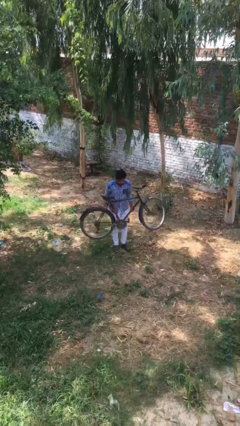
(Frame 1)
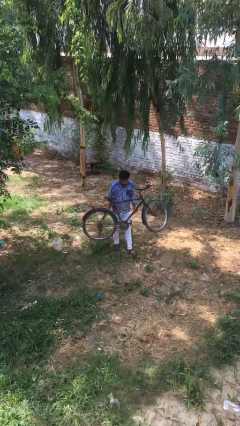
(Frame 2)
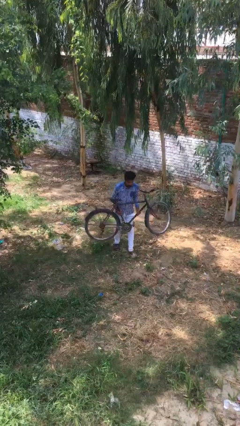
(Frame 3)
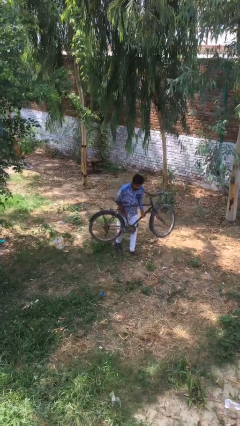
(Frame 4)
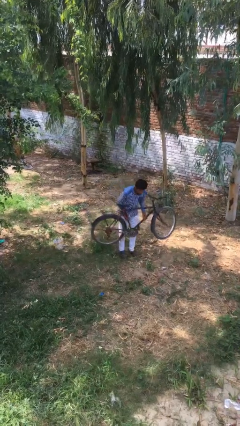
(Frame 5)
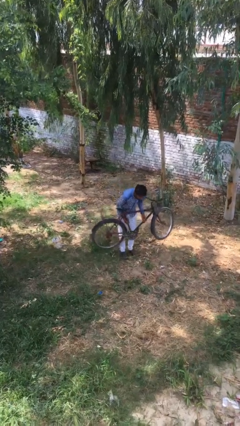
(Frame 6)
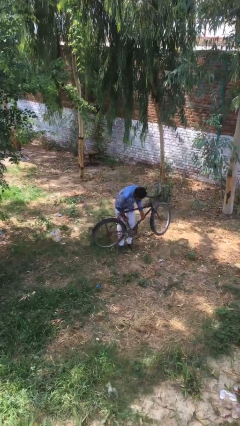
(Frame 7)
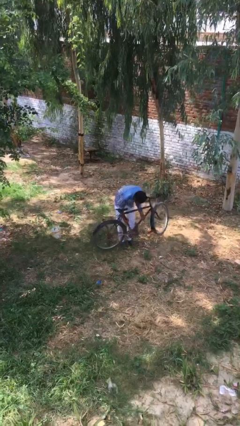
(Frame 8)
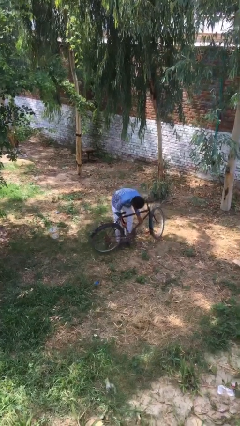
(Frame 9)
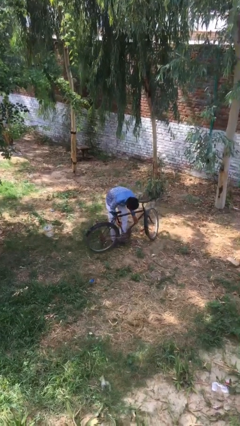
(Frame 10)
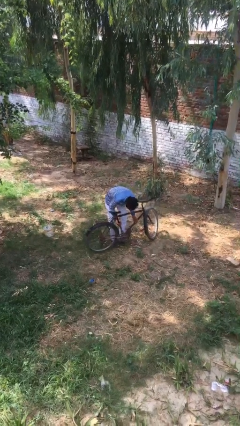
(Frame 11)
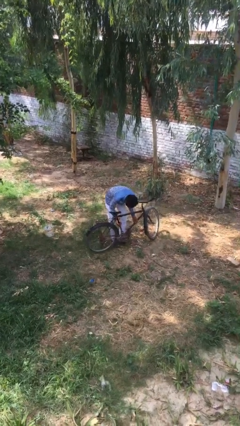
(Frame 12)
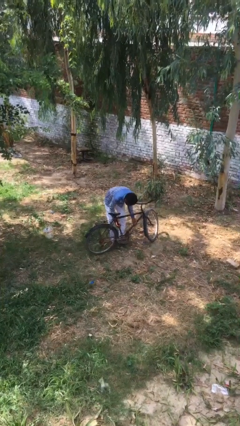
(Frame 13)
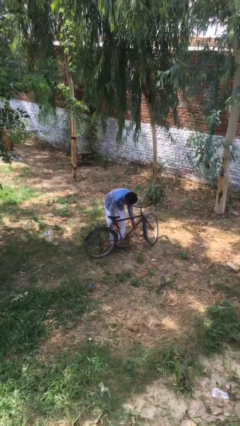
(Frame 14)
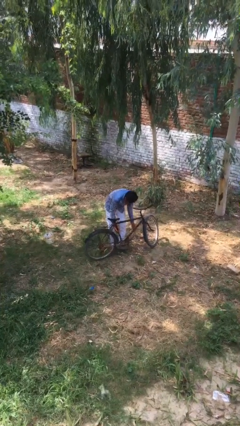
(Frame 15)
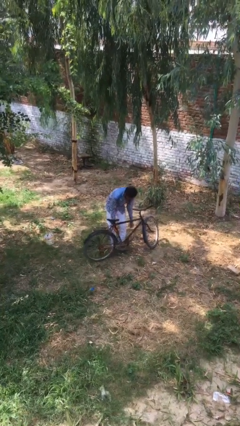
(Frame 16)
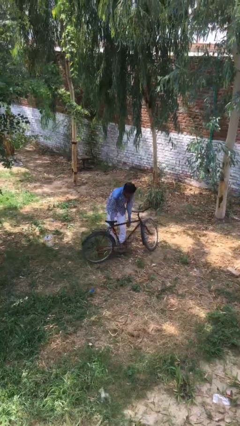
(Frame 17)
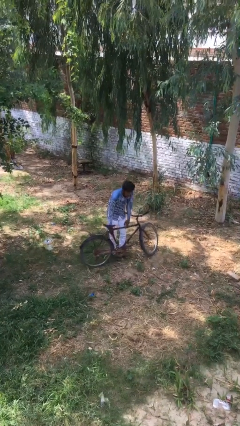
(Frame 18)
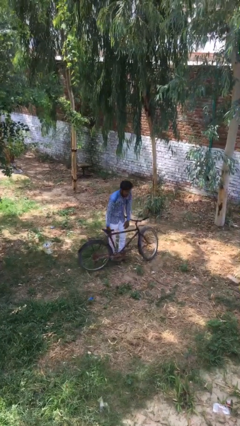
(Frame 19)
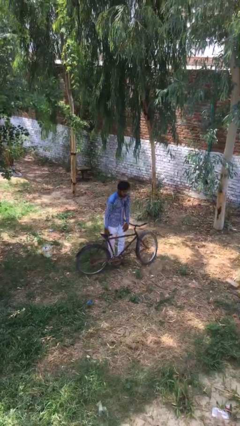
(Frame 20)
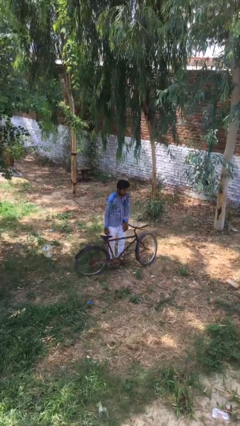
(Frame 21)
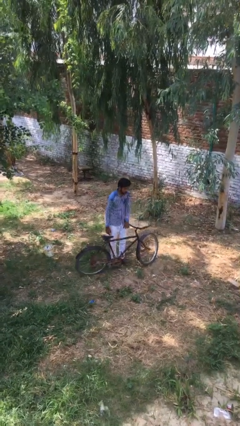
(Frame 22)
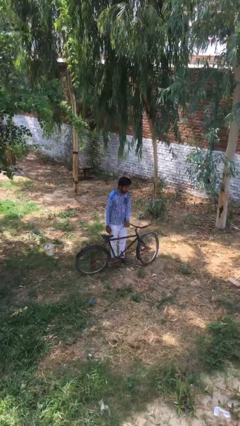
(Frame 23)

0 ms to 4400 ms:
person puts down object on floor

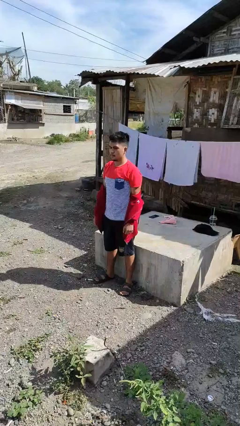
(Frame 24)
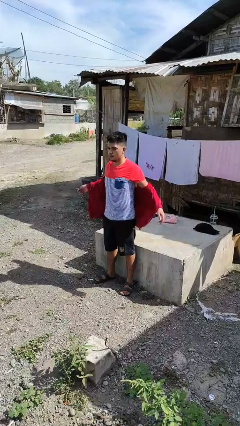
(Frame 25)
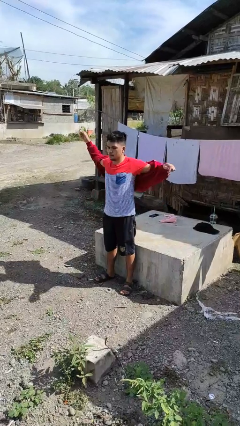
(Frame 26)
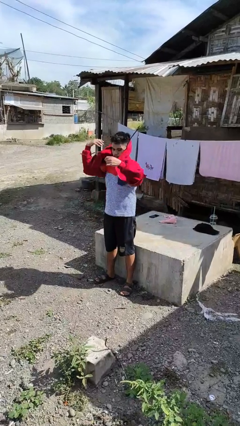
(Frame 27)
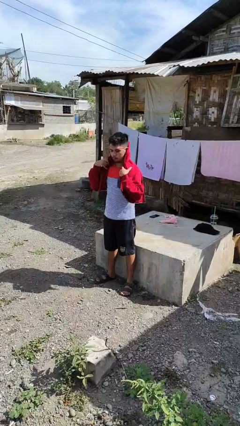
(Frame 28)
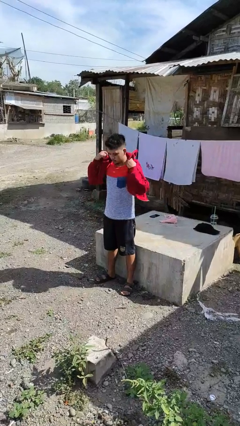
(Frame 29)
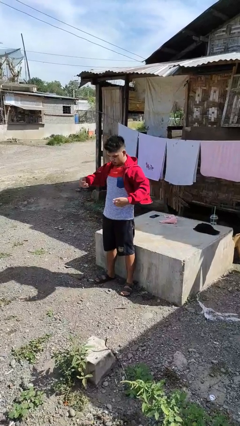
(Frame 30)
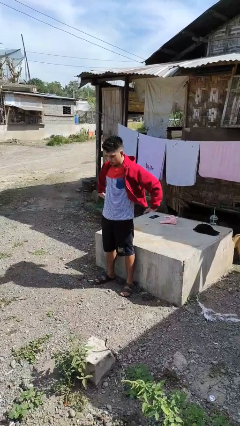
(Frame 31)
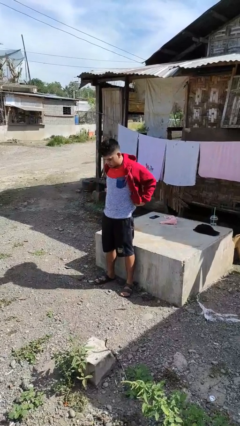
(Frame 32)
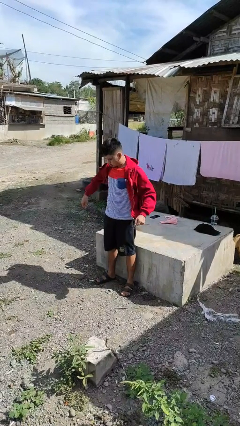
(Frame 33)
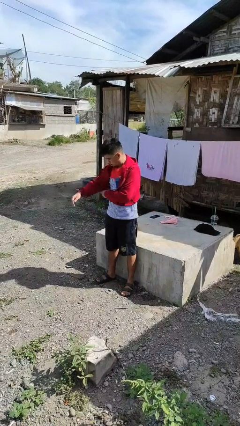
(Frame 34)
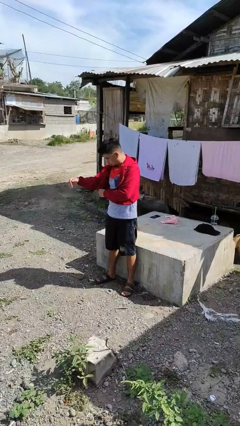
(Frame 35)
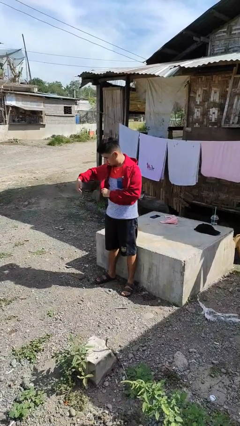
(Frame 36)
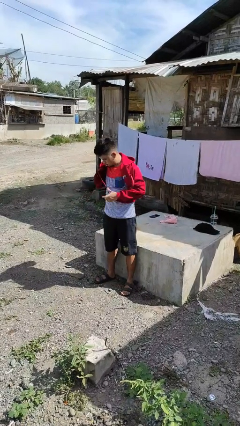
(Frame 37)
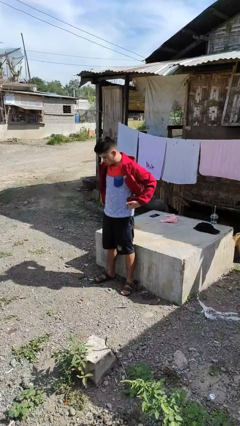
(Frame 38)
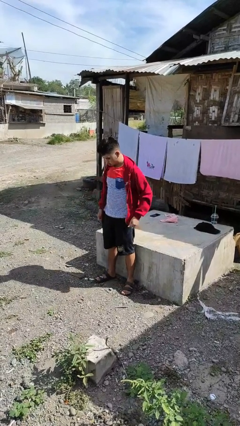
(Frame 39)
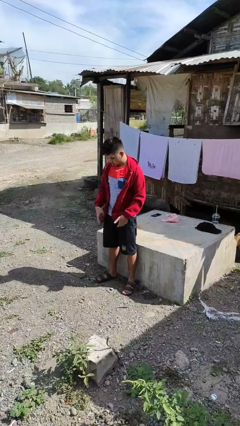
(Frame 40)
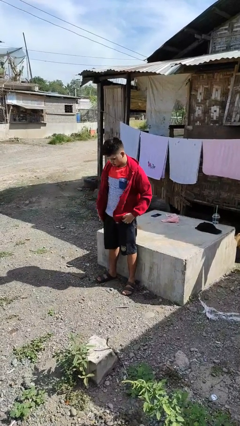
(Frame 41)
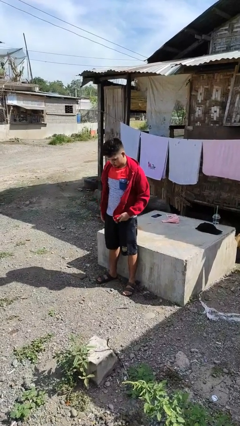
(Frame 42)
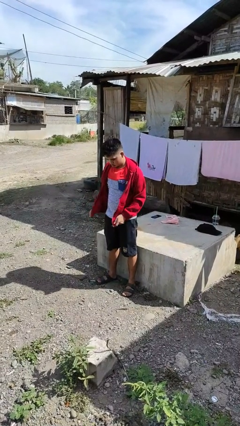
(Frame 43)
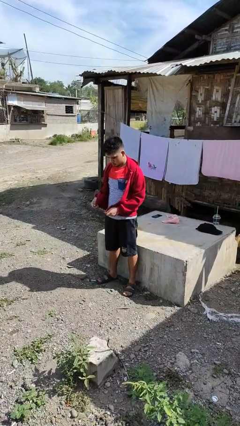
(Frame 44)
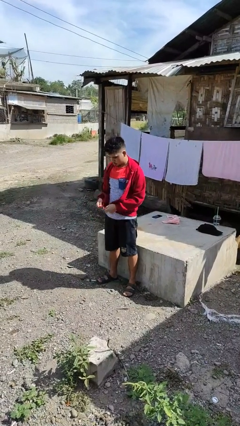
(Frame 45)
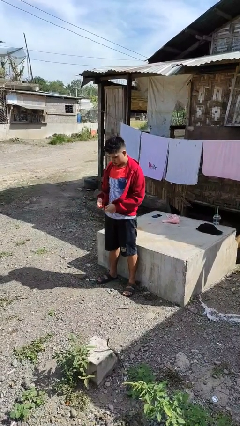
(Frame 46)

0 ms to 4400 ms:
person puts on jacket

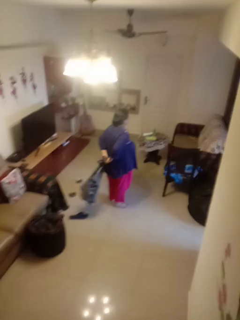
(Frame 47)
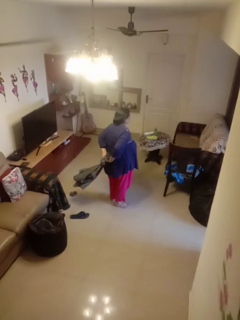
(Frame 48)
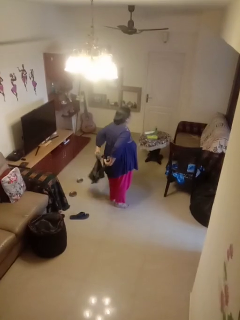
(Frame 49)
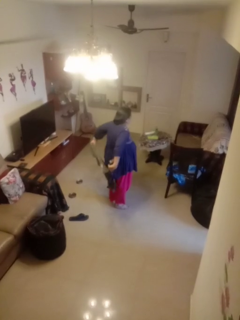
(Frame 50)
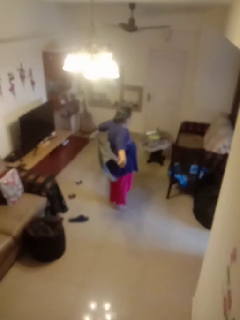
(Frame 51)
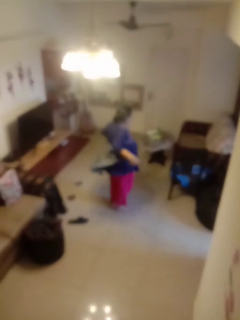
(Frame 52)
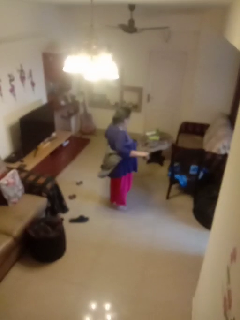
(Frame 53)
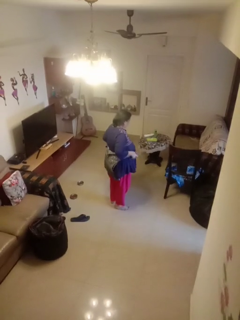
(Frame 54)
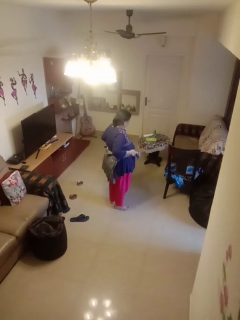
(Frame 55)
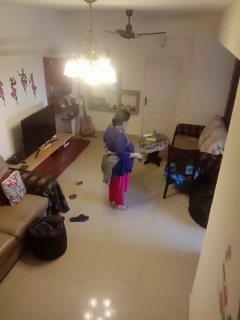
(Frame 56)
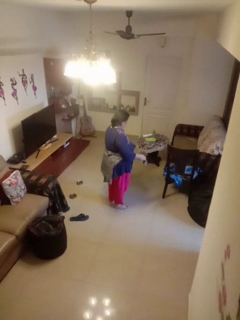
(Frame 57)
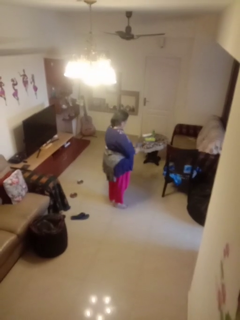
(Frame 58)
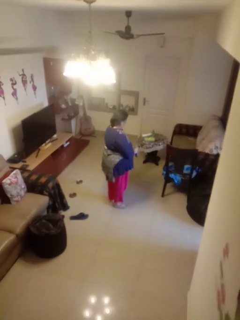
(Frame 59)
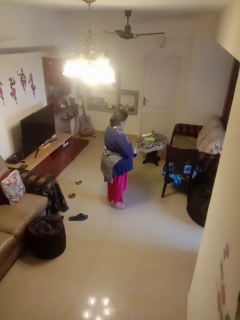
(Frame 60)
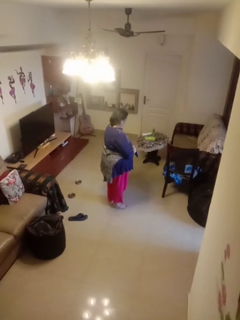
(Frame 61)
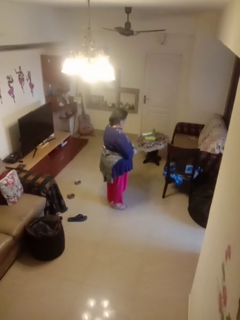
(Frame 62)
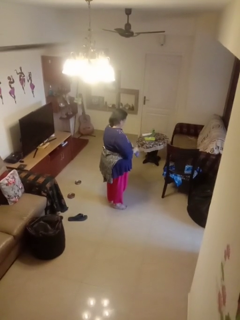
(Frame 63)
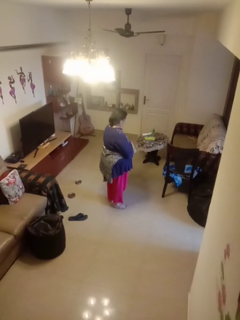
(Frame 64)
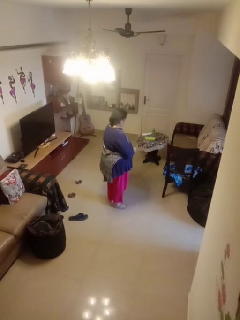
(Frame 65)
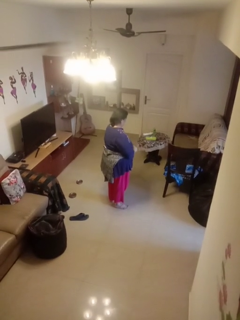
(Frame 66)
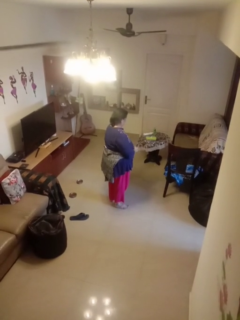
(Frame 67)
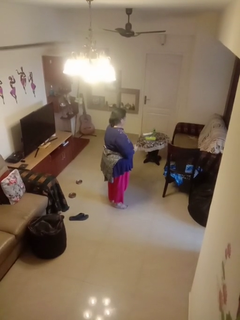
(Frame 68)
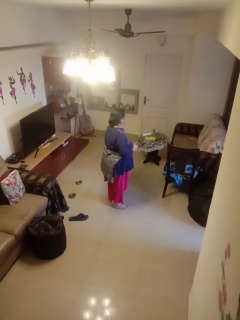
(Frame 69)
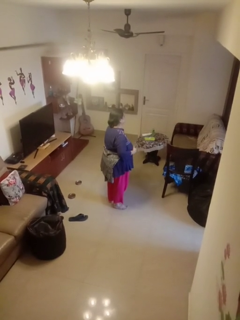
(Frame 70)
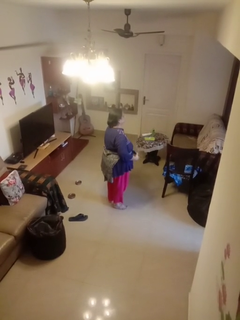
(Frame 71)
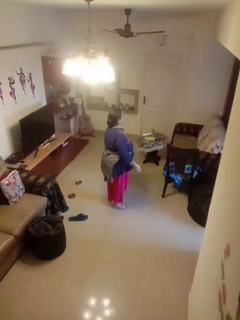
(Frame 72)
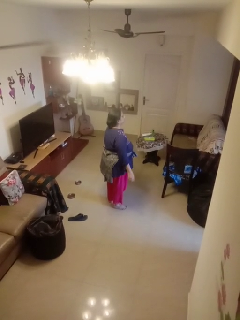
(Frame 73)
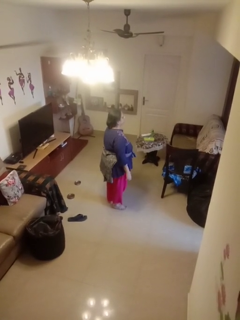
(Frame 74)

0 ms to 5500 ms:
person ties jacket around waist

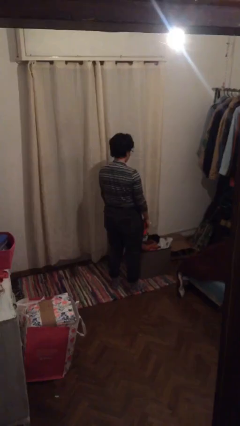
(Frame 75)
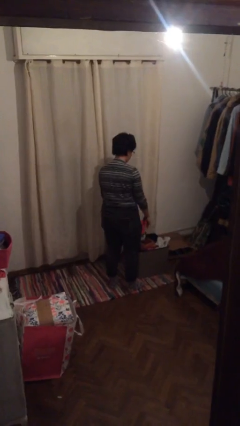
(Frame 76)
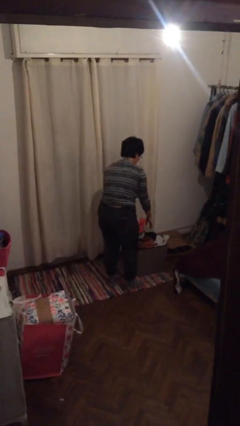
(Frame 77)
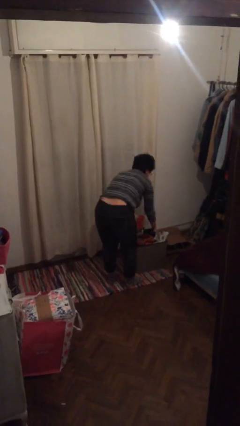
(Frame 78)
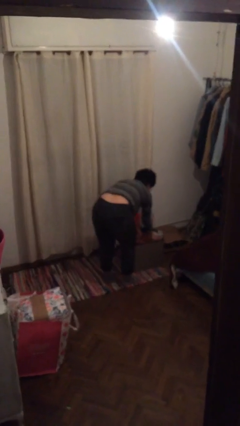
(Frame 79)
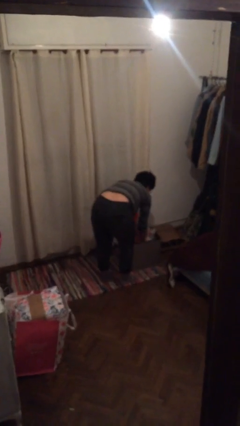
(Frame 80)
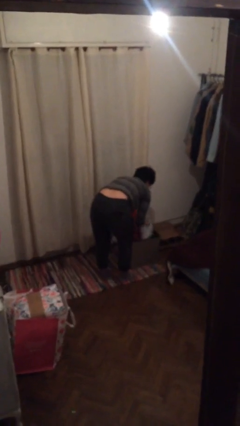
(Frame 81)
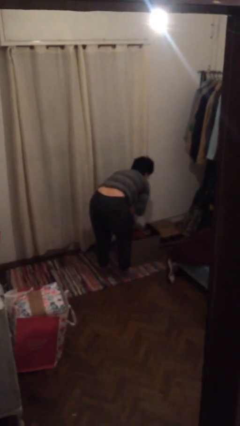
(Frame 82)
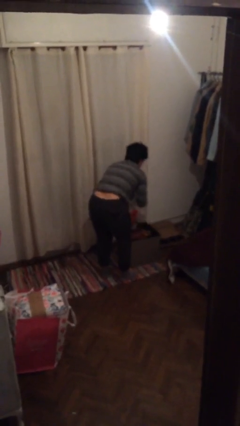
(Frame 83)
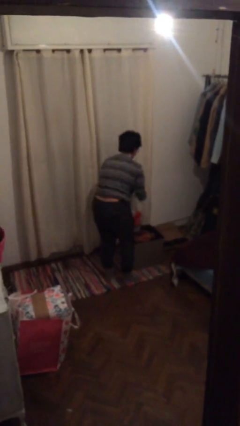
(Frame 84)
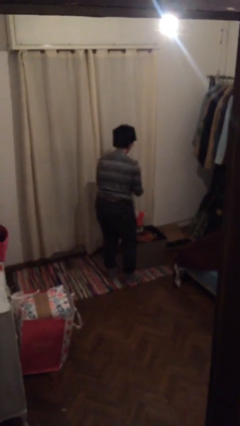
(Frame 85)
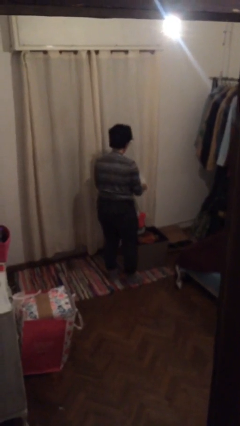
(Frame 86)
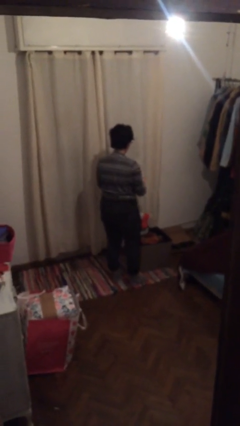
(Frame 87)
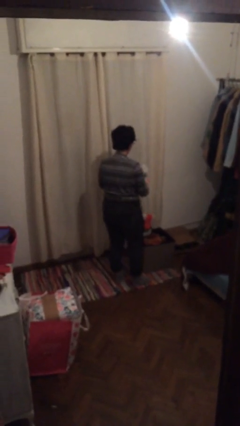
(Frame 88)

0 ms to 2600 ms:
person takes object from basket

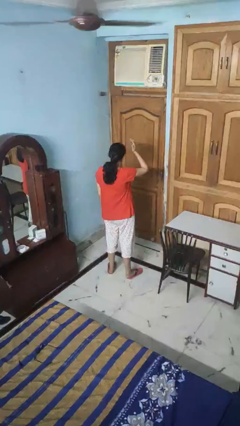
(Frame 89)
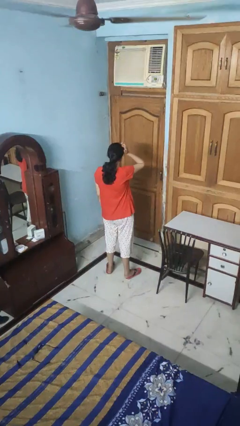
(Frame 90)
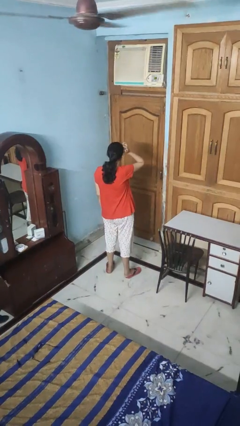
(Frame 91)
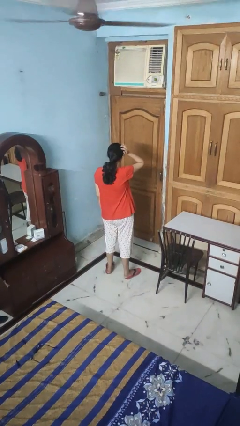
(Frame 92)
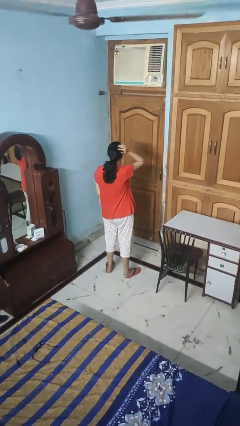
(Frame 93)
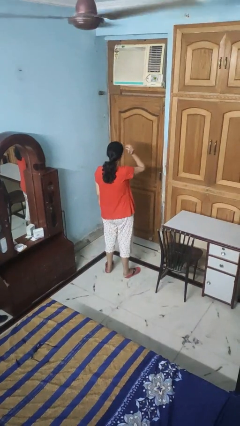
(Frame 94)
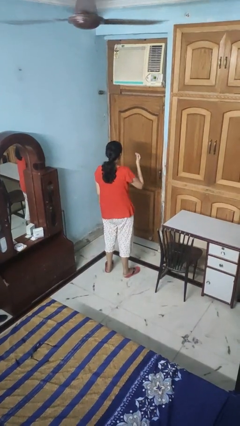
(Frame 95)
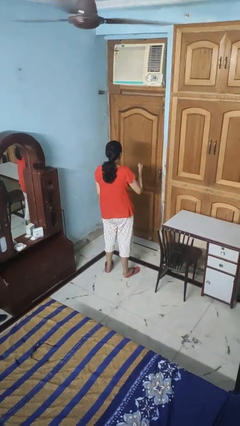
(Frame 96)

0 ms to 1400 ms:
person pats head

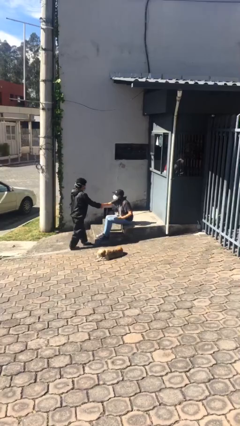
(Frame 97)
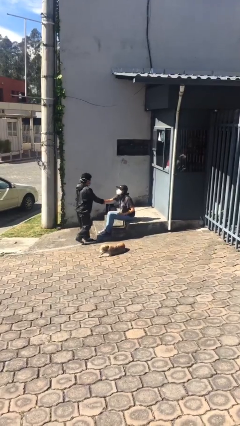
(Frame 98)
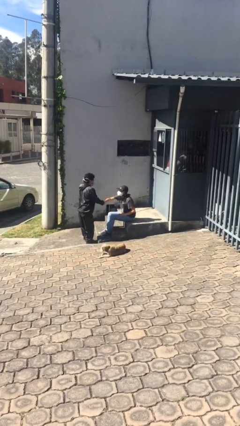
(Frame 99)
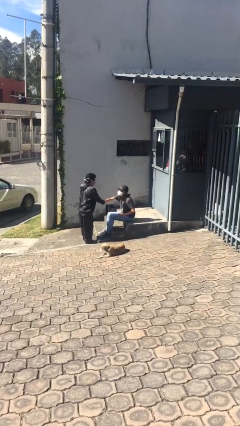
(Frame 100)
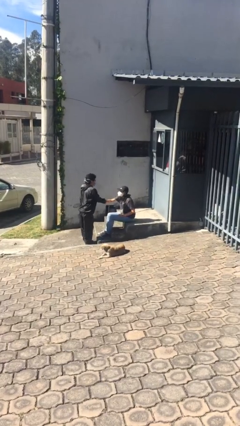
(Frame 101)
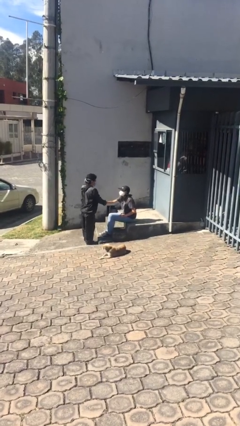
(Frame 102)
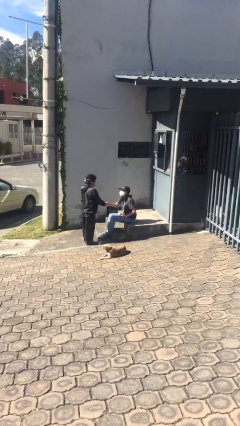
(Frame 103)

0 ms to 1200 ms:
person shakes hand
